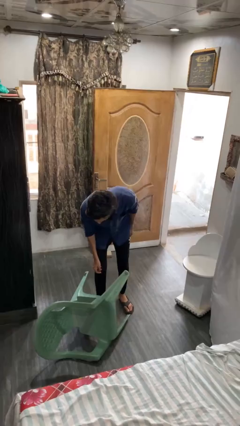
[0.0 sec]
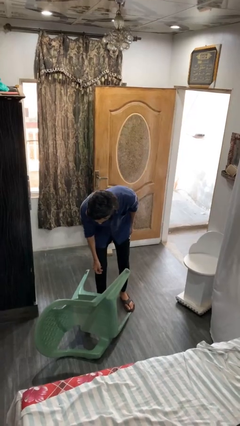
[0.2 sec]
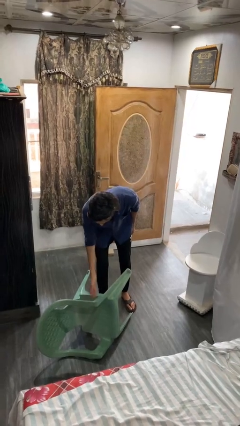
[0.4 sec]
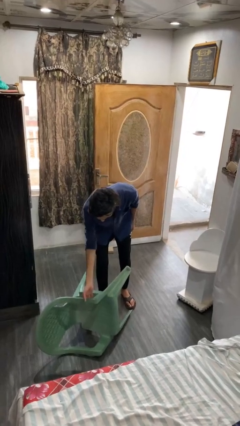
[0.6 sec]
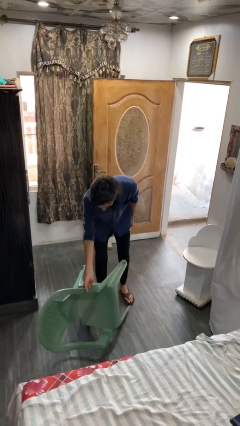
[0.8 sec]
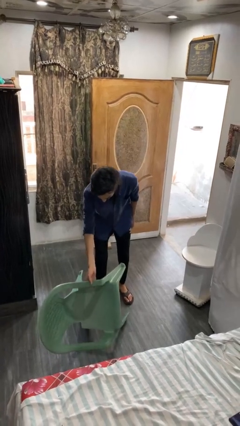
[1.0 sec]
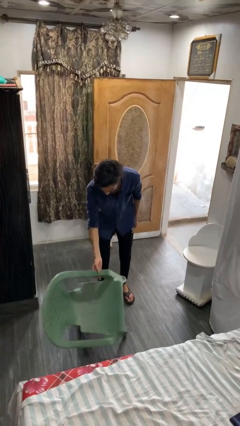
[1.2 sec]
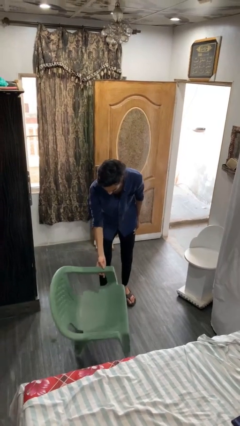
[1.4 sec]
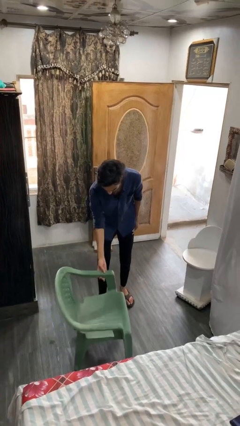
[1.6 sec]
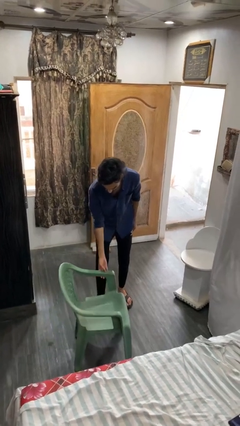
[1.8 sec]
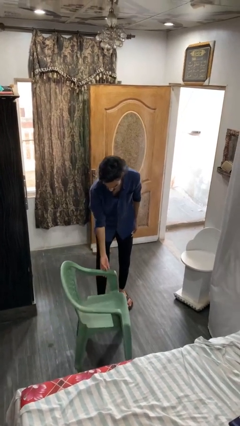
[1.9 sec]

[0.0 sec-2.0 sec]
person sets upright furniture

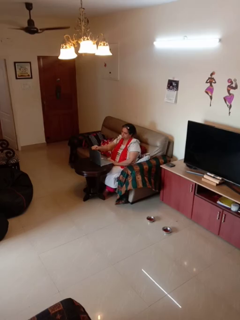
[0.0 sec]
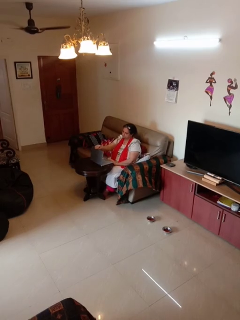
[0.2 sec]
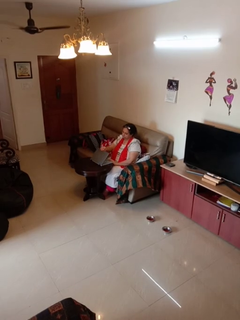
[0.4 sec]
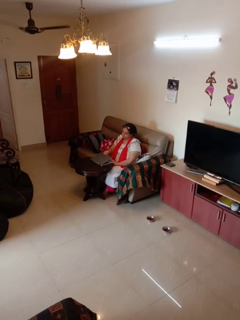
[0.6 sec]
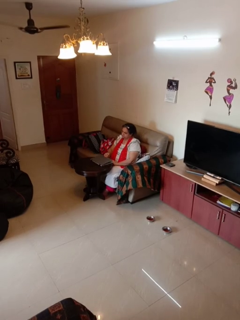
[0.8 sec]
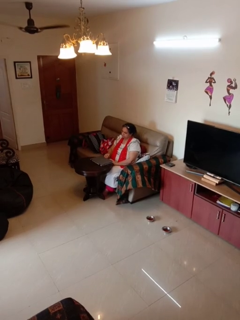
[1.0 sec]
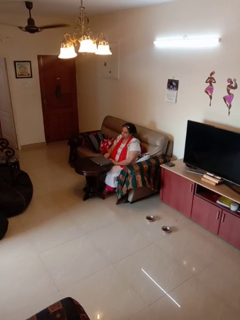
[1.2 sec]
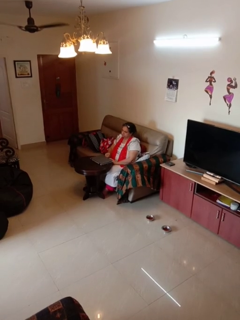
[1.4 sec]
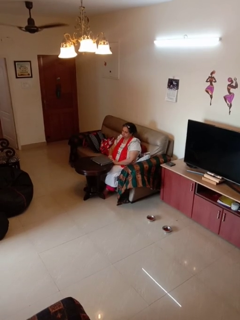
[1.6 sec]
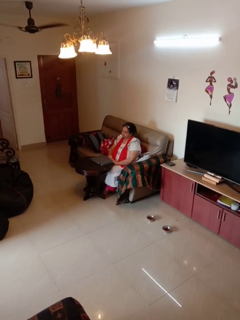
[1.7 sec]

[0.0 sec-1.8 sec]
person closes laptop

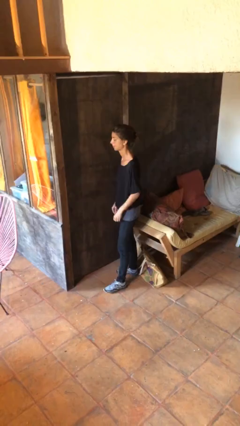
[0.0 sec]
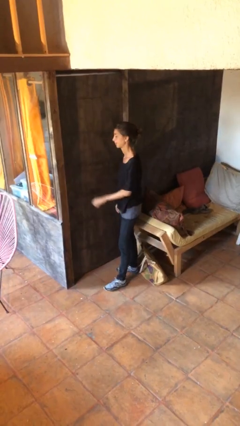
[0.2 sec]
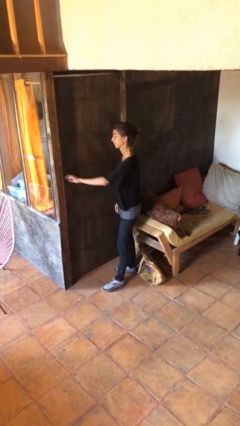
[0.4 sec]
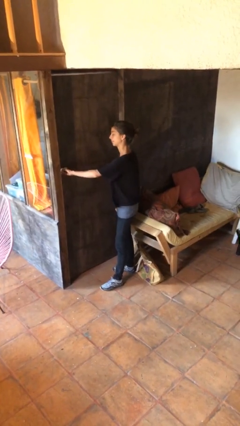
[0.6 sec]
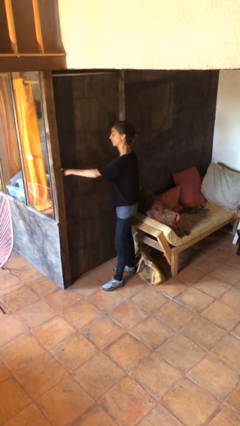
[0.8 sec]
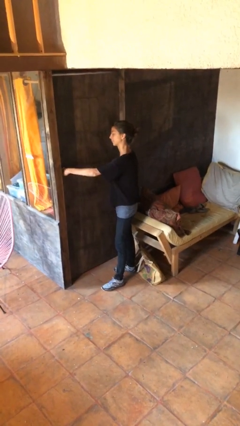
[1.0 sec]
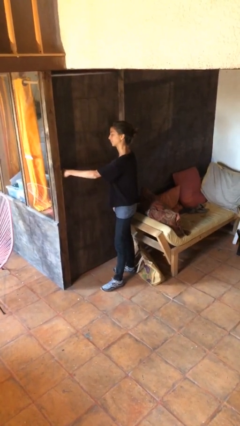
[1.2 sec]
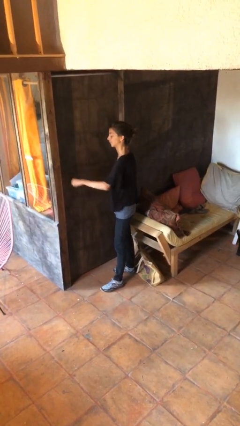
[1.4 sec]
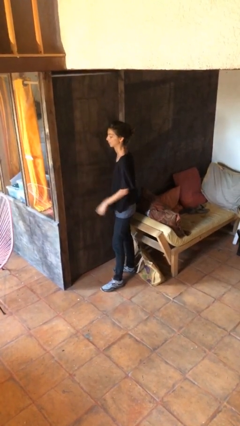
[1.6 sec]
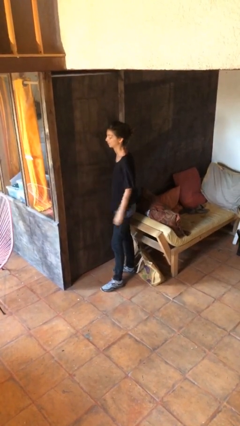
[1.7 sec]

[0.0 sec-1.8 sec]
person locks door with keys

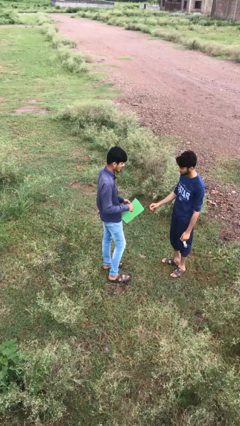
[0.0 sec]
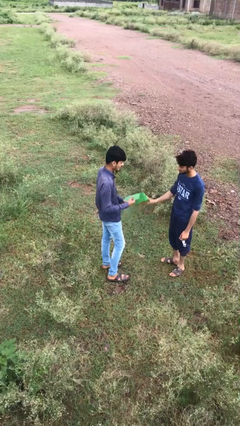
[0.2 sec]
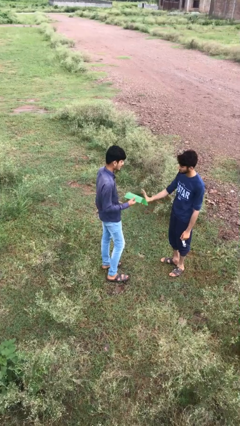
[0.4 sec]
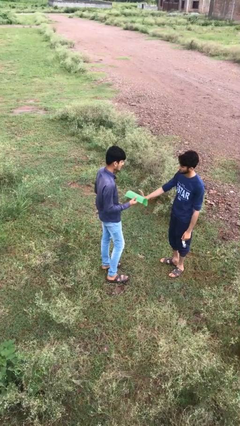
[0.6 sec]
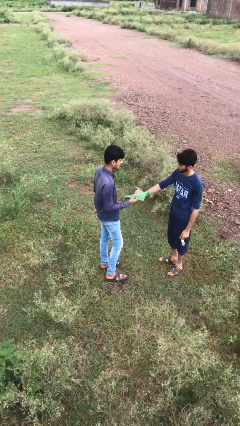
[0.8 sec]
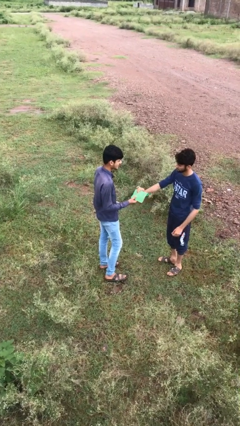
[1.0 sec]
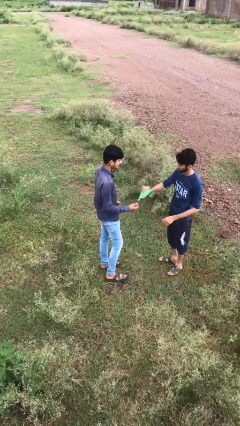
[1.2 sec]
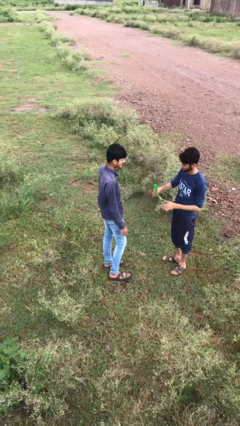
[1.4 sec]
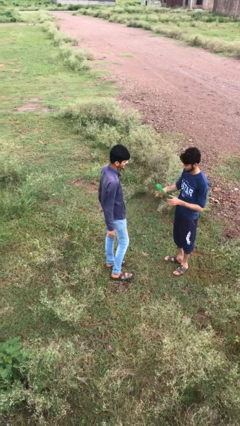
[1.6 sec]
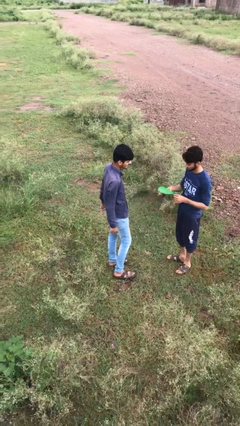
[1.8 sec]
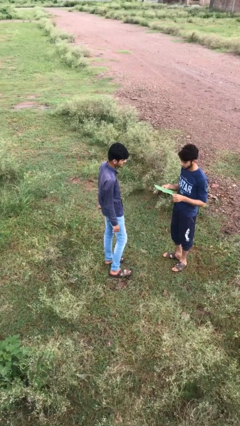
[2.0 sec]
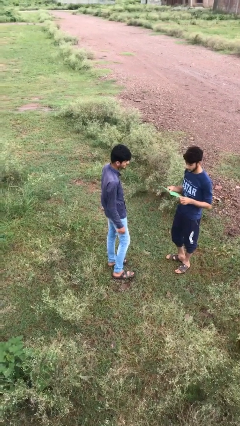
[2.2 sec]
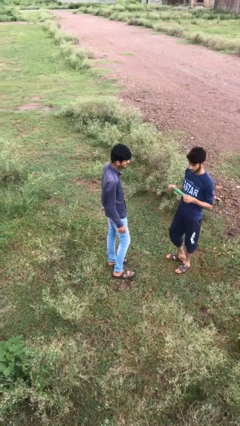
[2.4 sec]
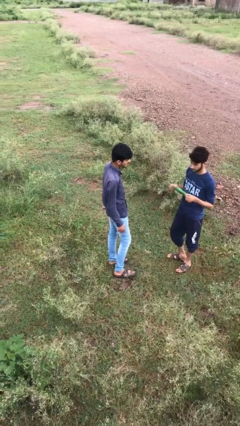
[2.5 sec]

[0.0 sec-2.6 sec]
person transfers object to person

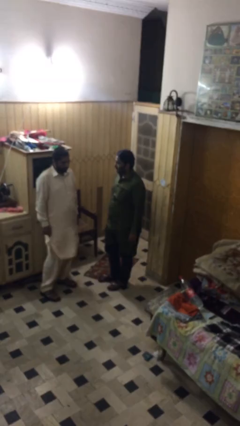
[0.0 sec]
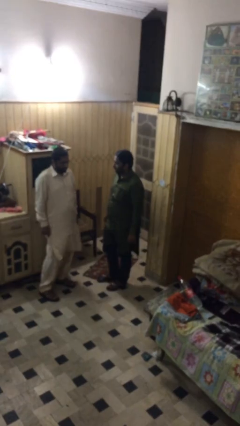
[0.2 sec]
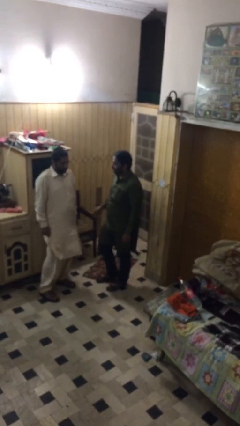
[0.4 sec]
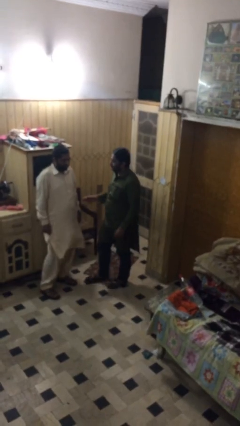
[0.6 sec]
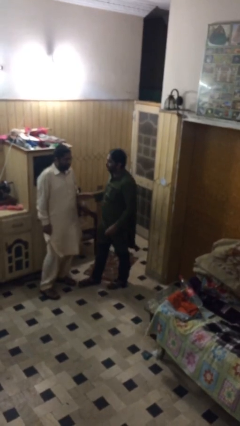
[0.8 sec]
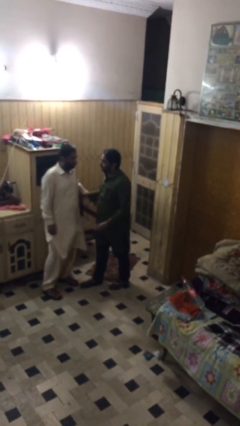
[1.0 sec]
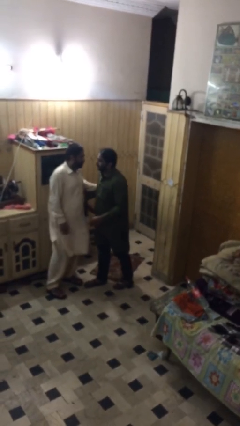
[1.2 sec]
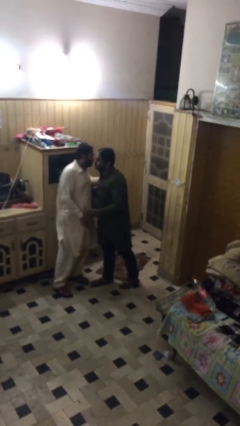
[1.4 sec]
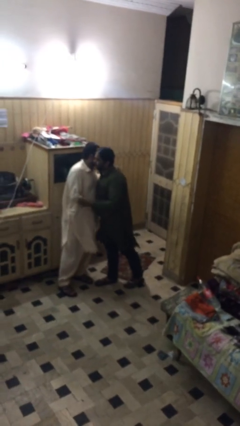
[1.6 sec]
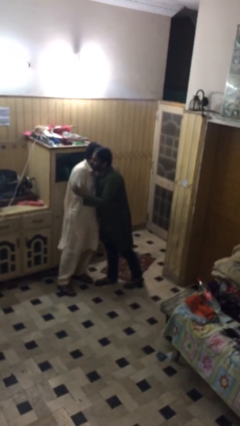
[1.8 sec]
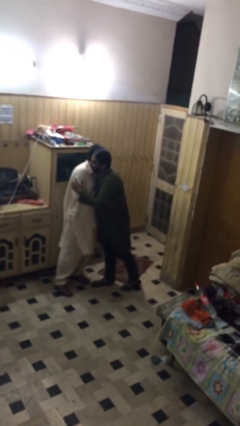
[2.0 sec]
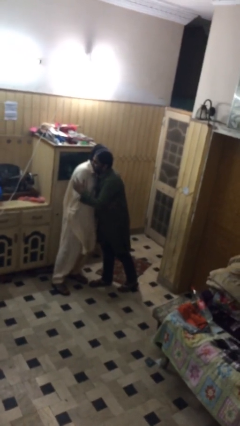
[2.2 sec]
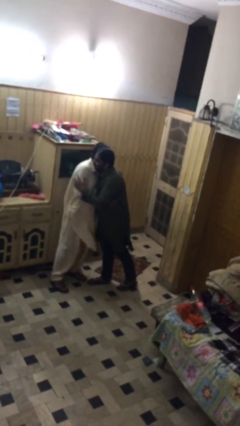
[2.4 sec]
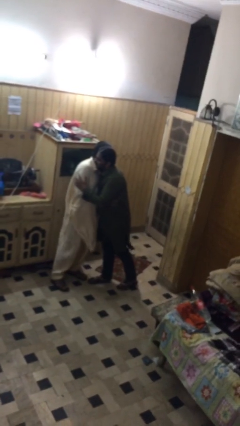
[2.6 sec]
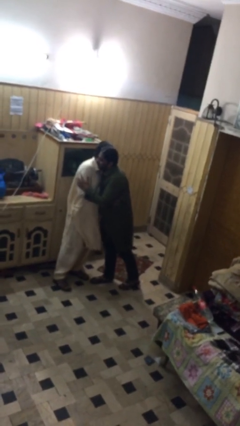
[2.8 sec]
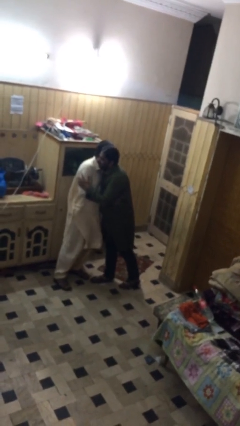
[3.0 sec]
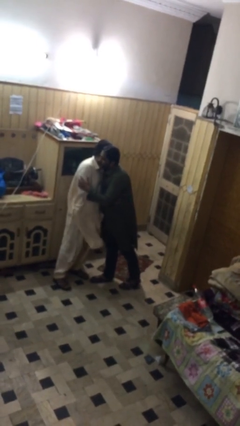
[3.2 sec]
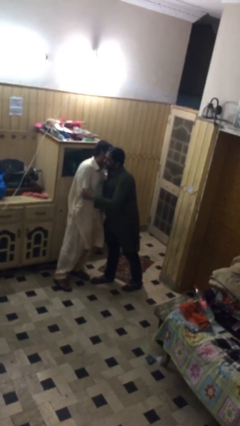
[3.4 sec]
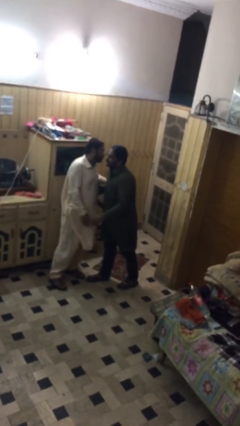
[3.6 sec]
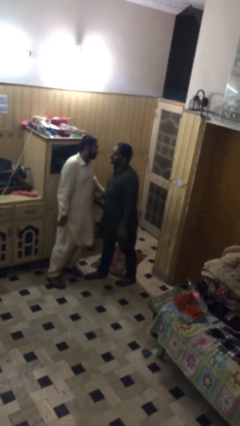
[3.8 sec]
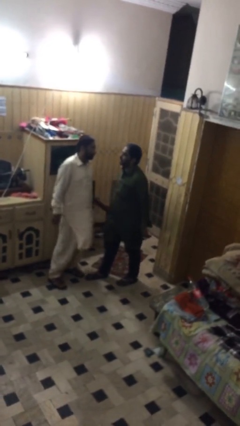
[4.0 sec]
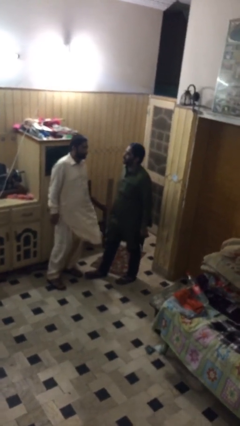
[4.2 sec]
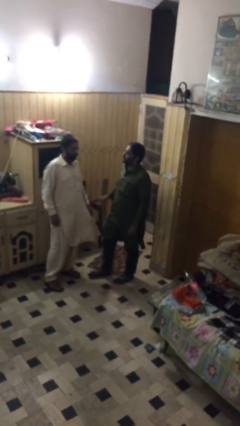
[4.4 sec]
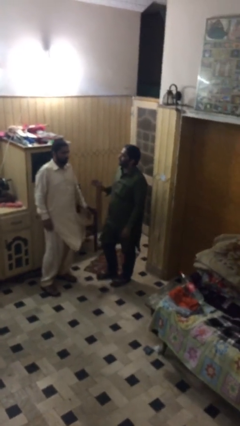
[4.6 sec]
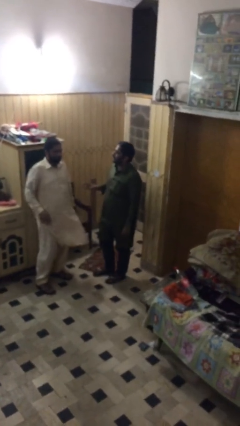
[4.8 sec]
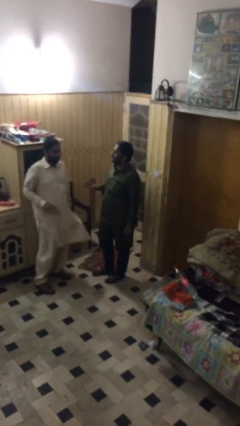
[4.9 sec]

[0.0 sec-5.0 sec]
person embraces person

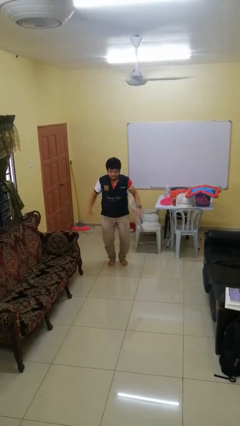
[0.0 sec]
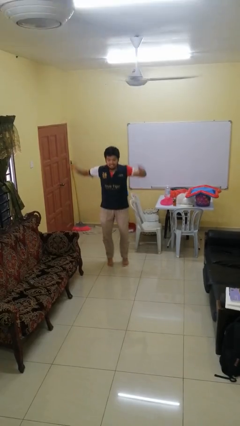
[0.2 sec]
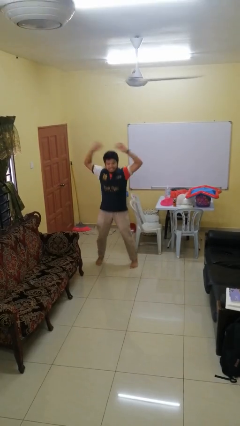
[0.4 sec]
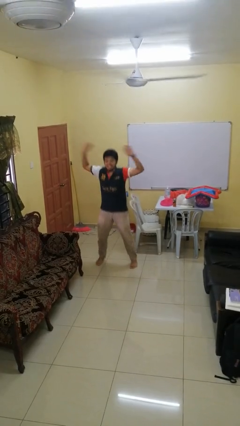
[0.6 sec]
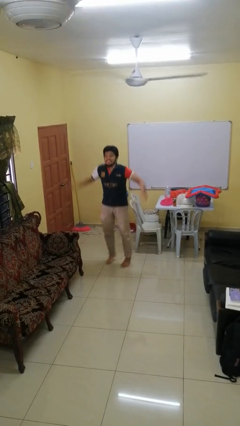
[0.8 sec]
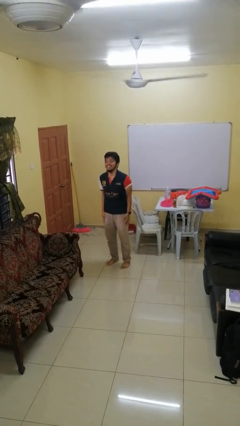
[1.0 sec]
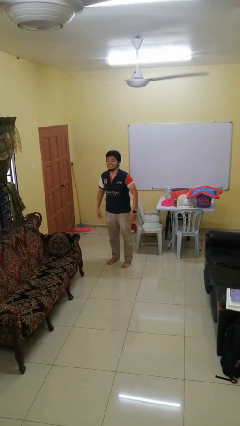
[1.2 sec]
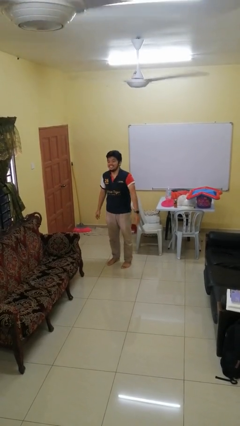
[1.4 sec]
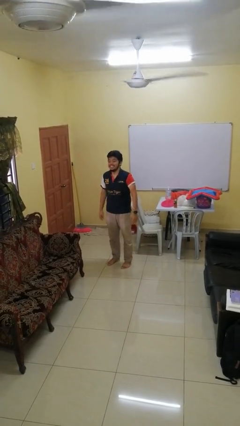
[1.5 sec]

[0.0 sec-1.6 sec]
person exercises with jumping jacks

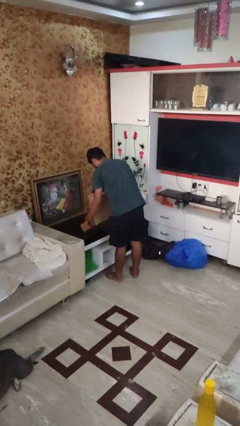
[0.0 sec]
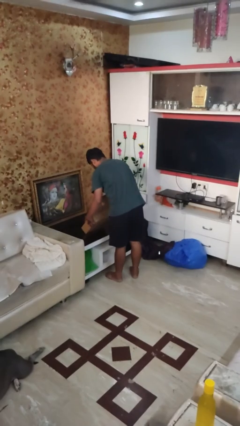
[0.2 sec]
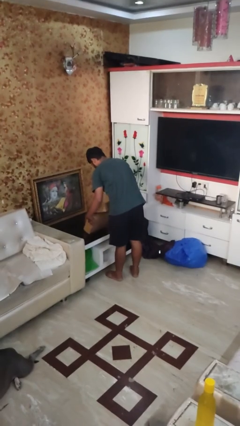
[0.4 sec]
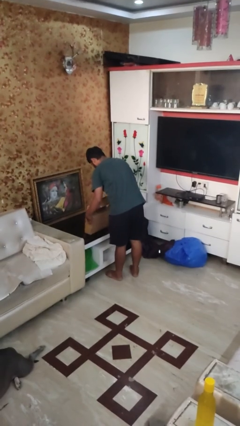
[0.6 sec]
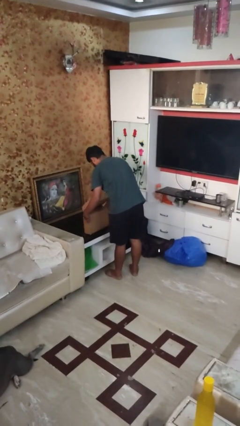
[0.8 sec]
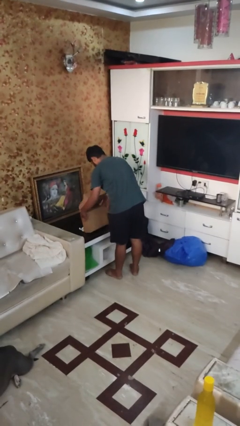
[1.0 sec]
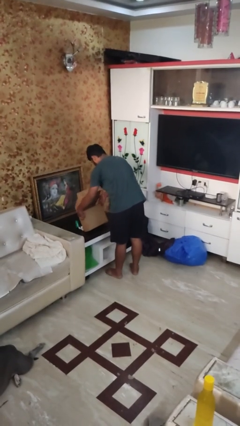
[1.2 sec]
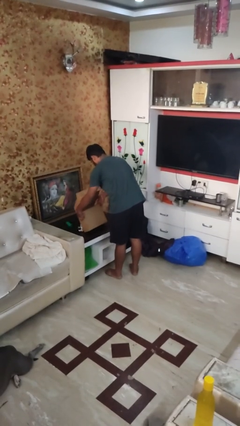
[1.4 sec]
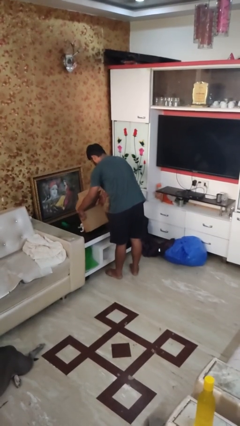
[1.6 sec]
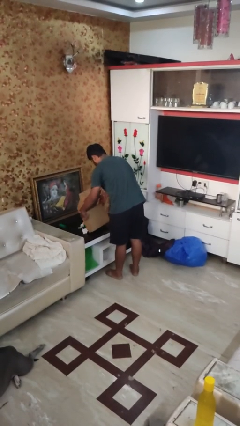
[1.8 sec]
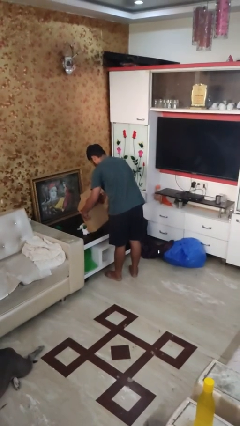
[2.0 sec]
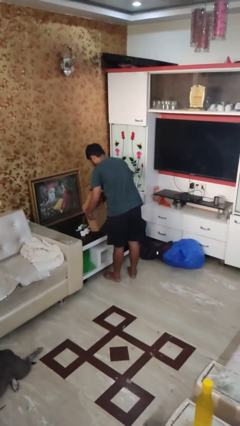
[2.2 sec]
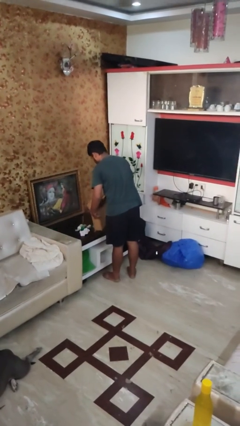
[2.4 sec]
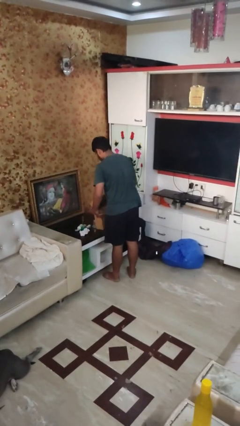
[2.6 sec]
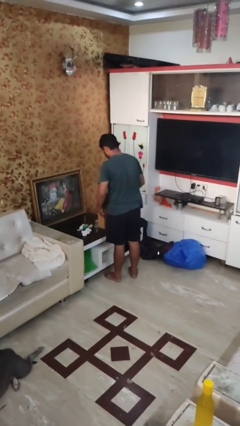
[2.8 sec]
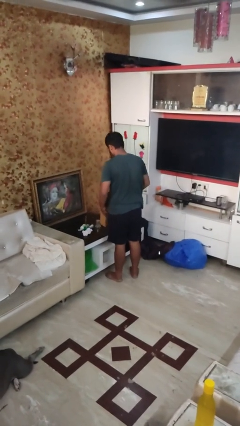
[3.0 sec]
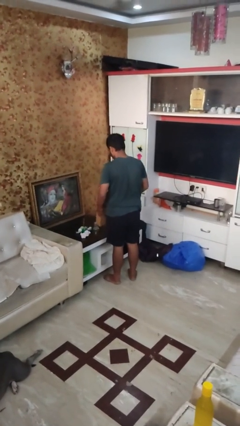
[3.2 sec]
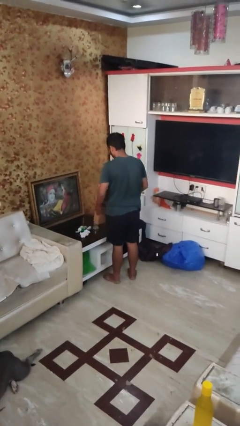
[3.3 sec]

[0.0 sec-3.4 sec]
person unloads box onto table
